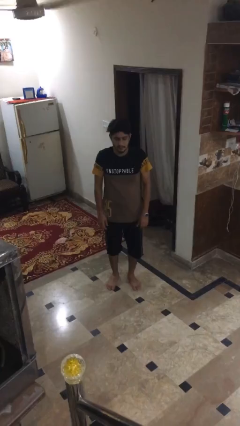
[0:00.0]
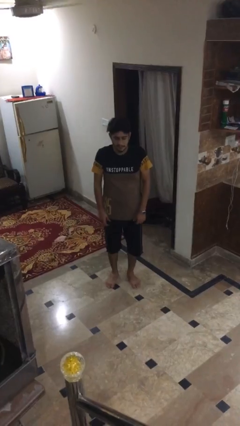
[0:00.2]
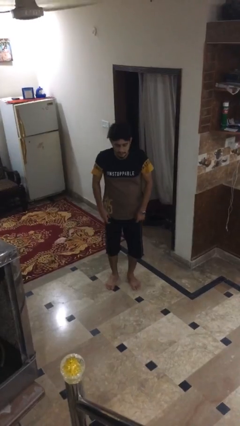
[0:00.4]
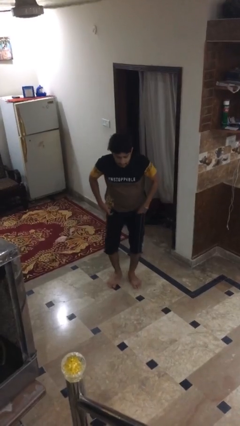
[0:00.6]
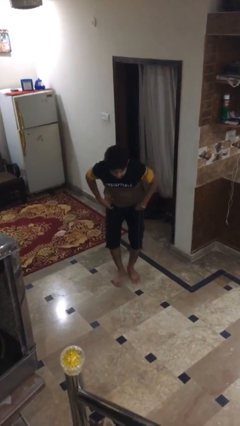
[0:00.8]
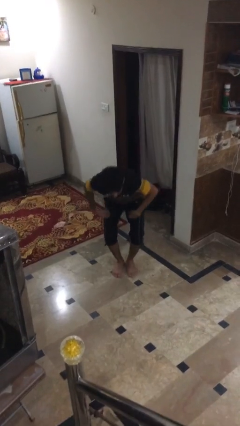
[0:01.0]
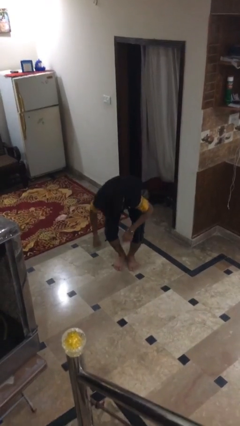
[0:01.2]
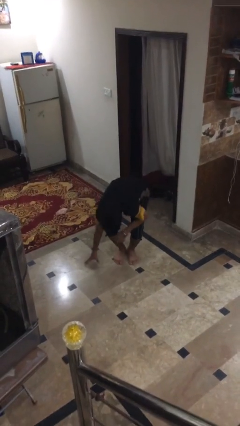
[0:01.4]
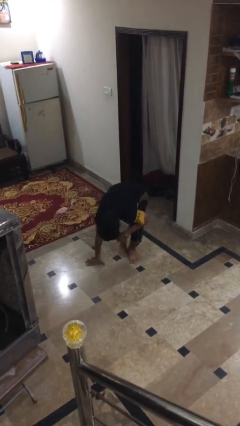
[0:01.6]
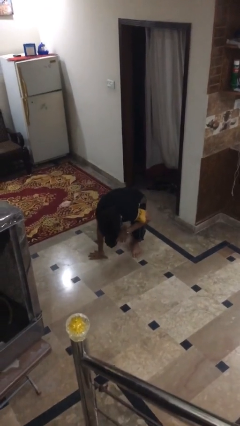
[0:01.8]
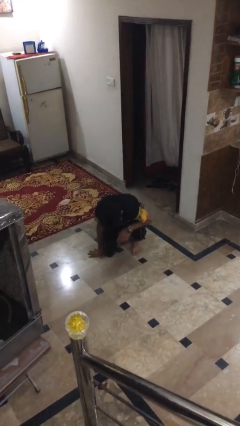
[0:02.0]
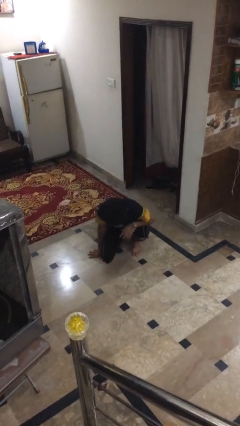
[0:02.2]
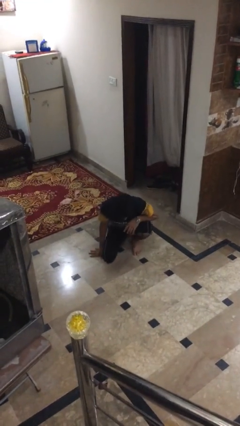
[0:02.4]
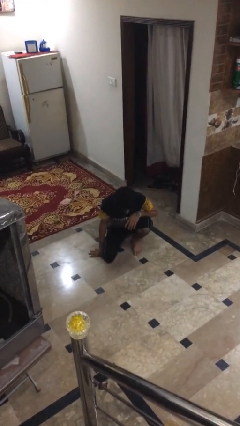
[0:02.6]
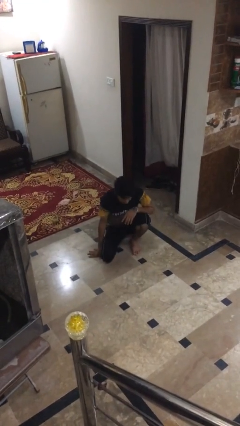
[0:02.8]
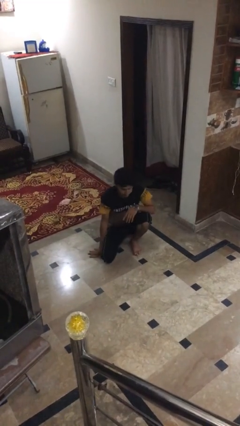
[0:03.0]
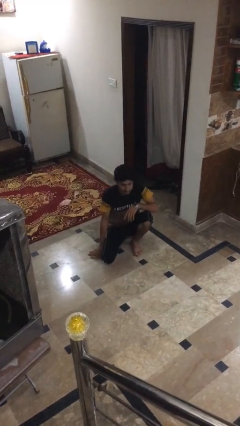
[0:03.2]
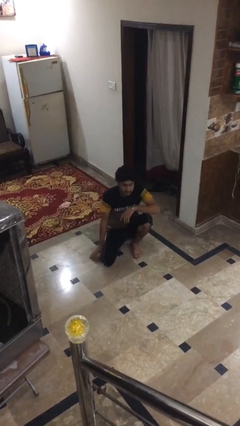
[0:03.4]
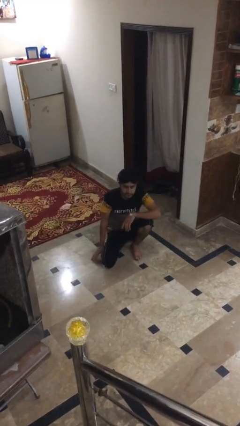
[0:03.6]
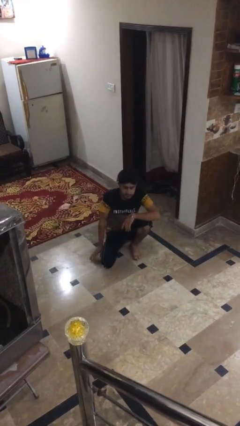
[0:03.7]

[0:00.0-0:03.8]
person sits crisscross

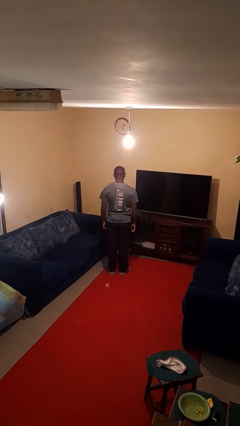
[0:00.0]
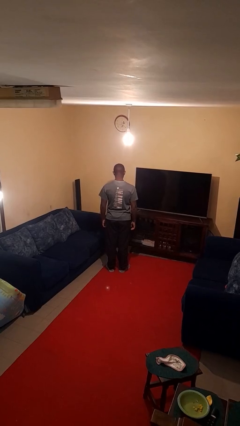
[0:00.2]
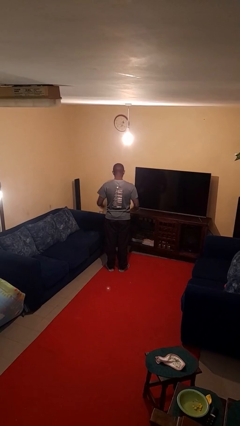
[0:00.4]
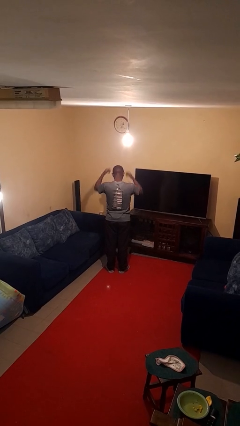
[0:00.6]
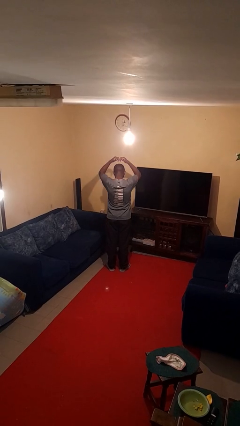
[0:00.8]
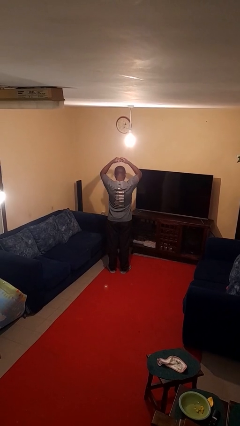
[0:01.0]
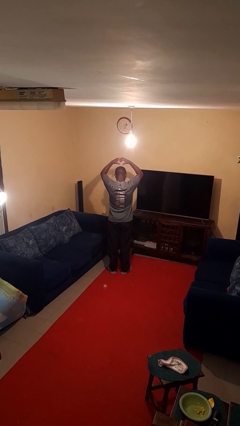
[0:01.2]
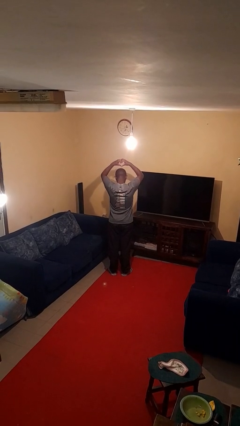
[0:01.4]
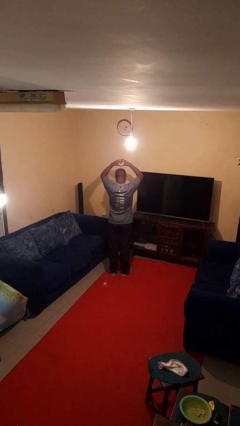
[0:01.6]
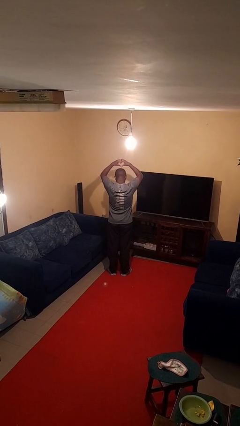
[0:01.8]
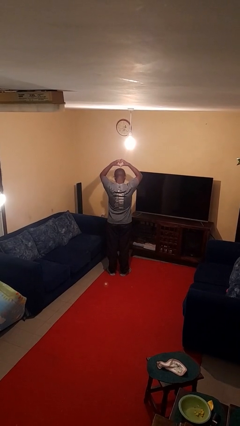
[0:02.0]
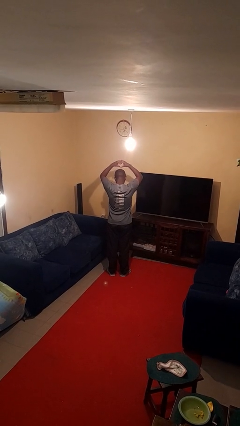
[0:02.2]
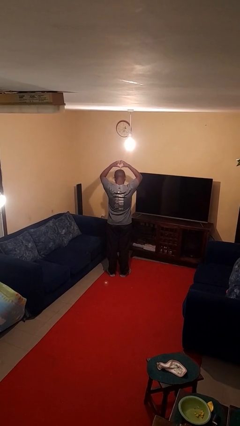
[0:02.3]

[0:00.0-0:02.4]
person gestures heart

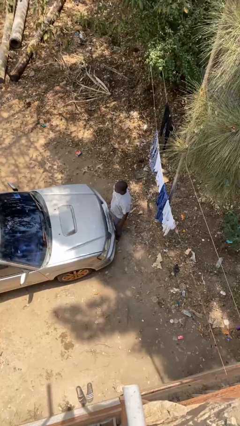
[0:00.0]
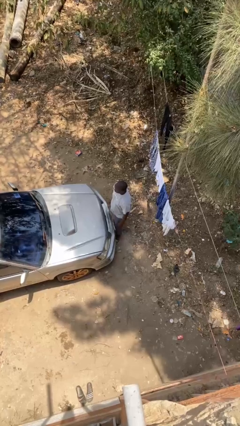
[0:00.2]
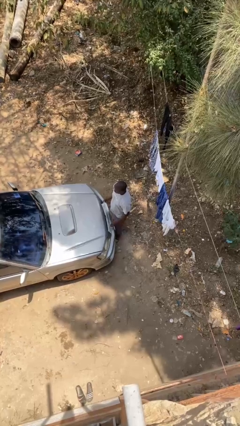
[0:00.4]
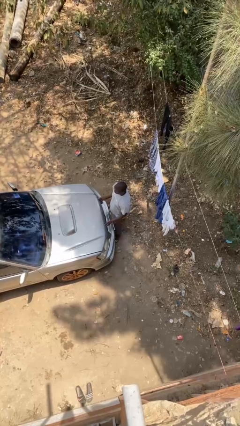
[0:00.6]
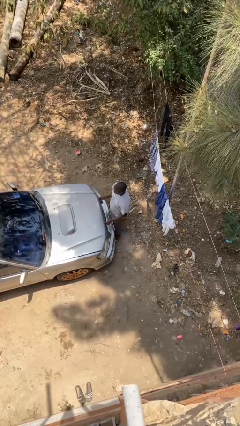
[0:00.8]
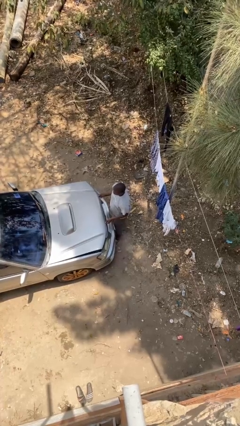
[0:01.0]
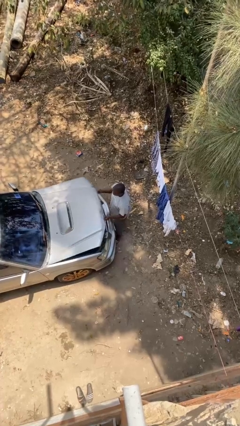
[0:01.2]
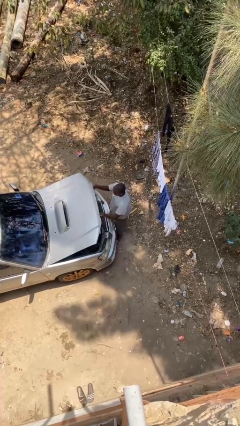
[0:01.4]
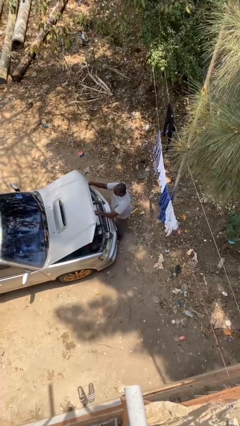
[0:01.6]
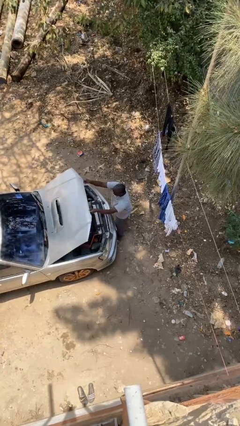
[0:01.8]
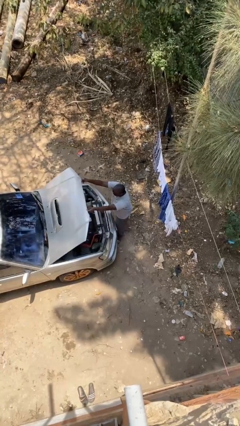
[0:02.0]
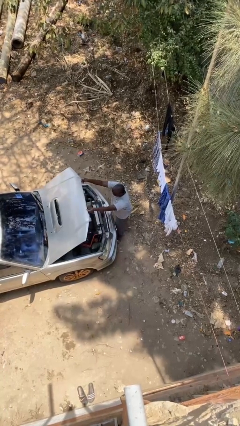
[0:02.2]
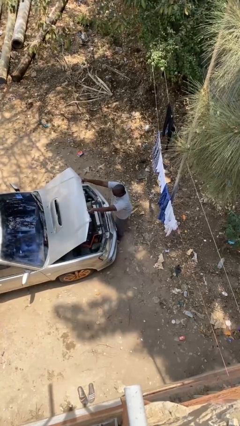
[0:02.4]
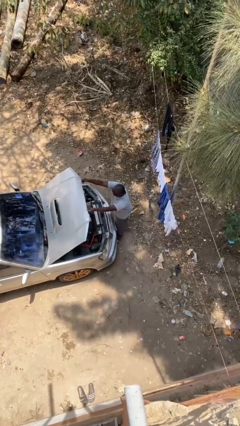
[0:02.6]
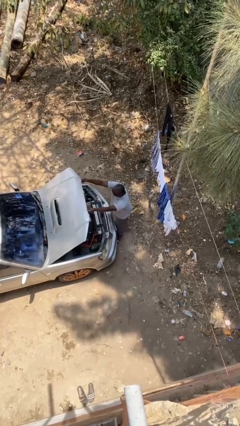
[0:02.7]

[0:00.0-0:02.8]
person opens car hood

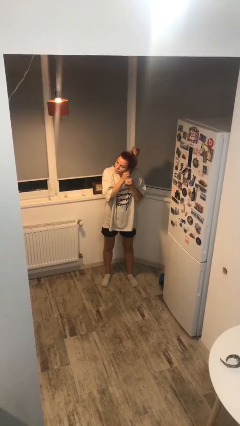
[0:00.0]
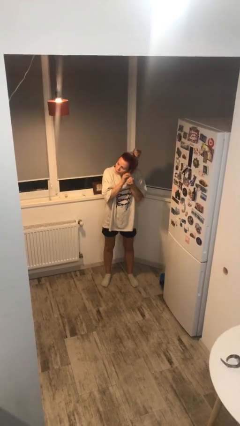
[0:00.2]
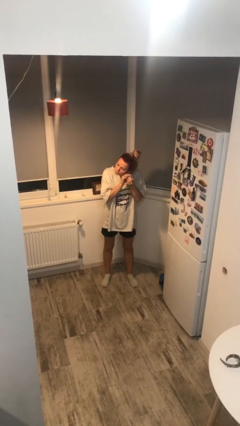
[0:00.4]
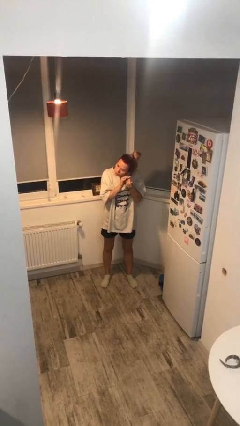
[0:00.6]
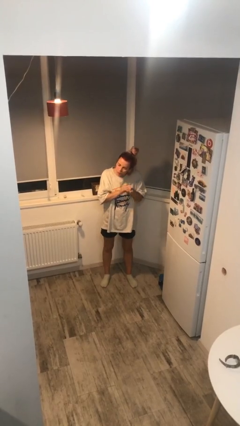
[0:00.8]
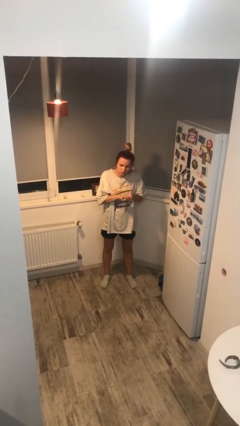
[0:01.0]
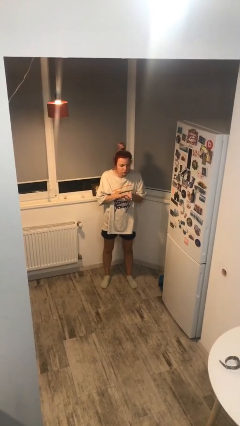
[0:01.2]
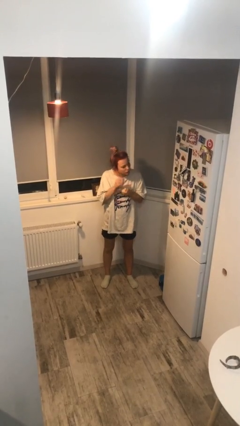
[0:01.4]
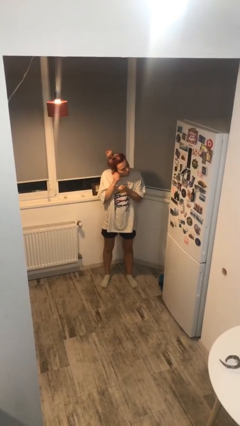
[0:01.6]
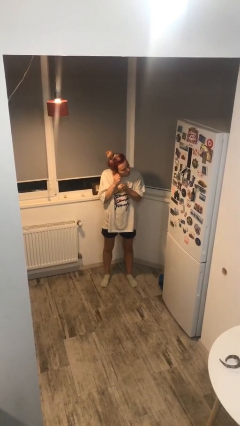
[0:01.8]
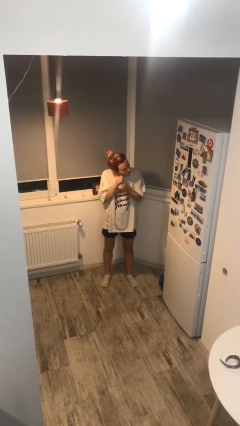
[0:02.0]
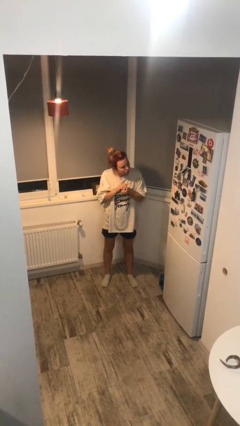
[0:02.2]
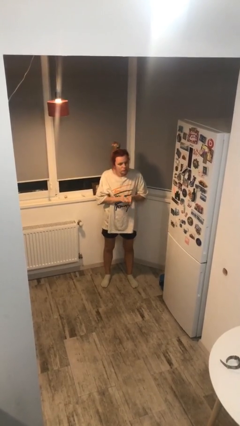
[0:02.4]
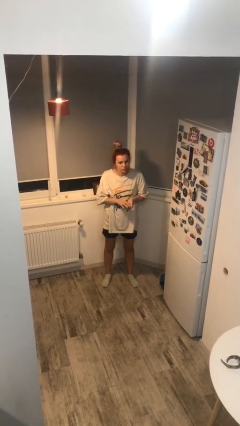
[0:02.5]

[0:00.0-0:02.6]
person takes off earrings

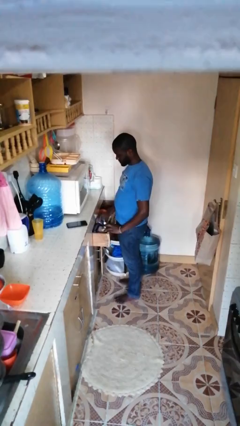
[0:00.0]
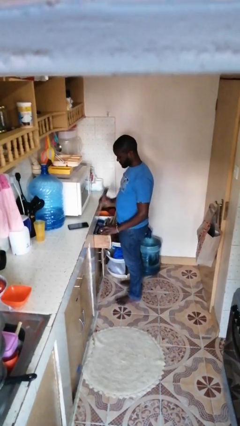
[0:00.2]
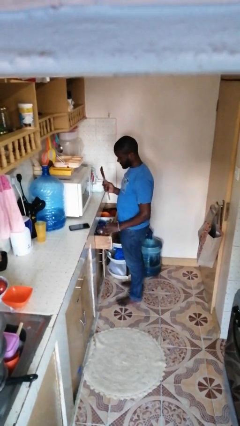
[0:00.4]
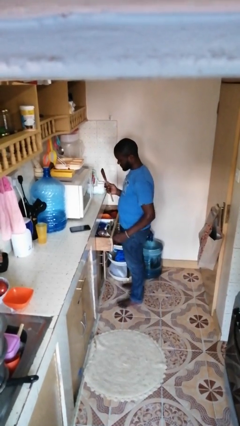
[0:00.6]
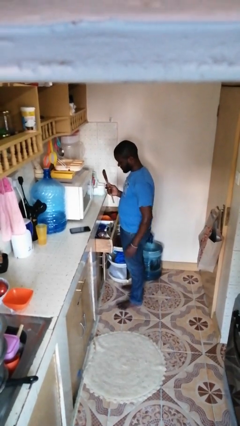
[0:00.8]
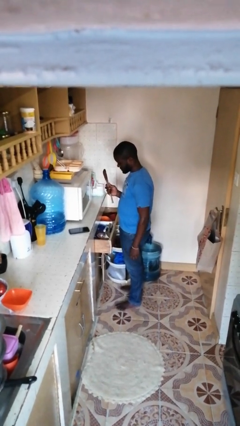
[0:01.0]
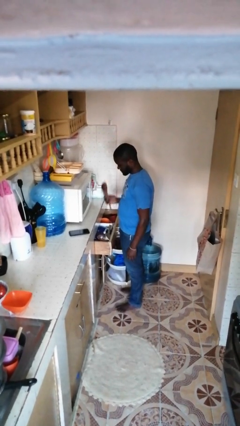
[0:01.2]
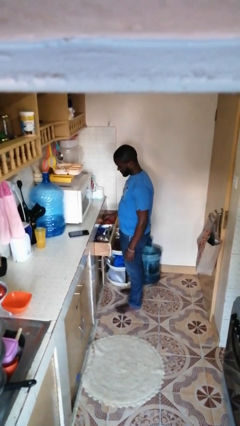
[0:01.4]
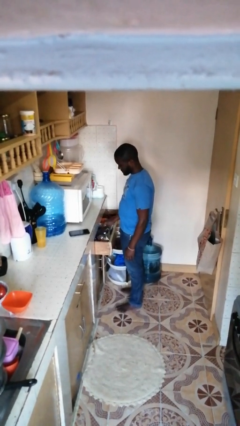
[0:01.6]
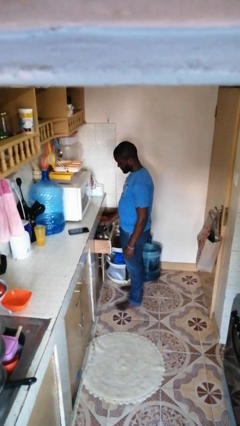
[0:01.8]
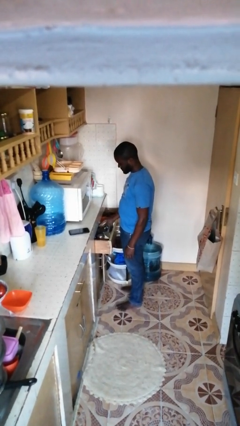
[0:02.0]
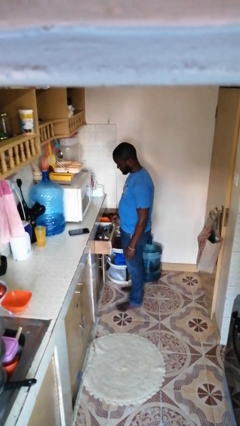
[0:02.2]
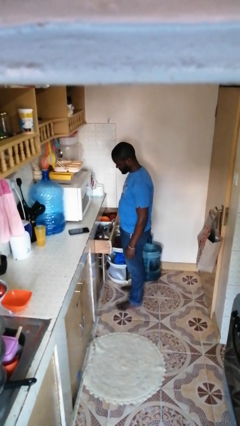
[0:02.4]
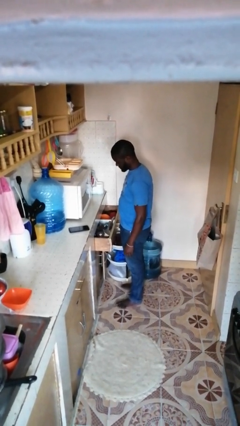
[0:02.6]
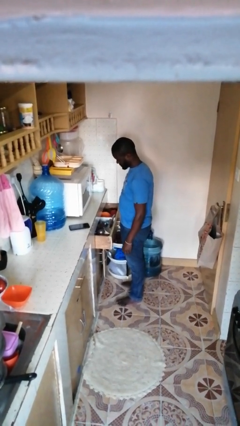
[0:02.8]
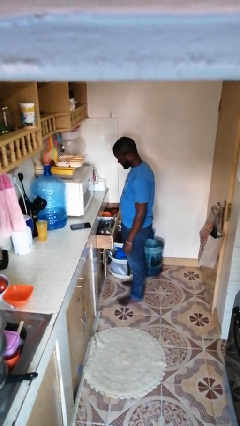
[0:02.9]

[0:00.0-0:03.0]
person puts object into kitchen drawer

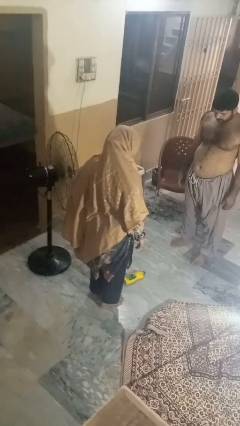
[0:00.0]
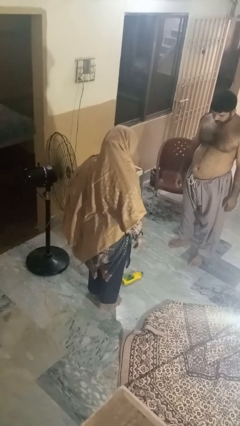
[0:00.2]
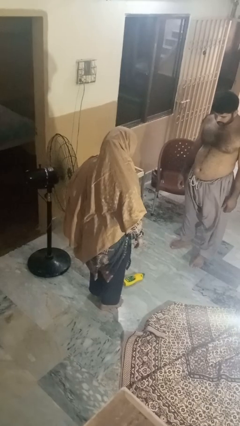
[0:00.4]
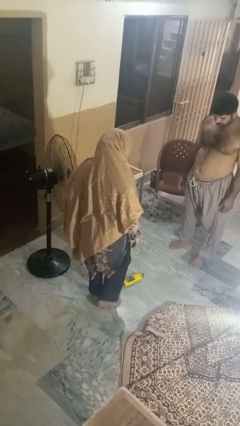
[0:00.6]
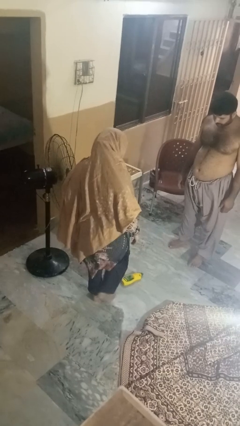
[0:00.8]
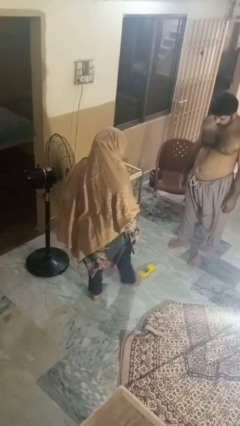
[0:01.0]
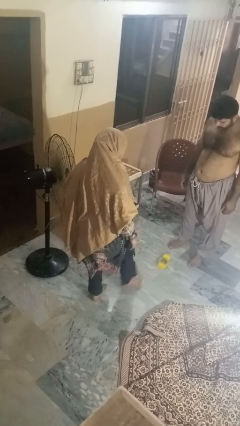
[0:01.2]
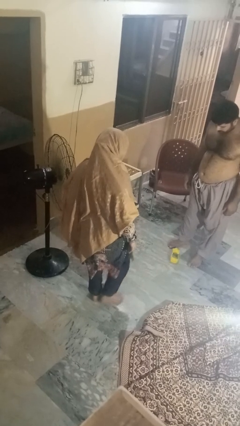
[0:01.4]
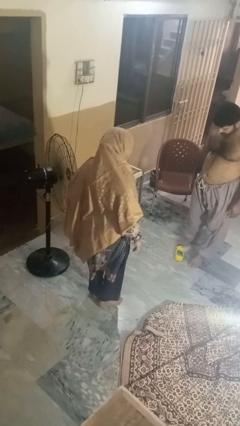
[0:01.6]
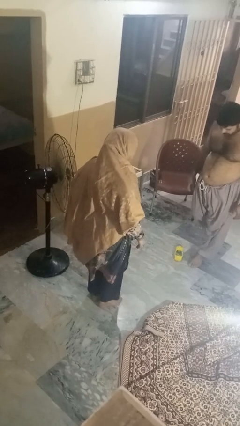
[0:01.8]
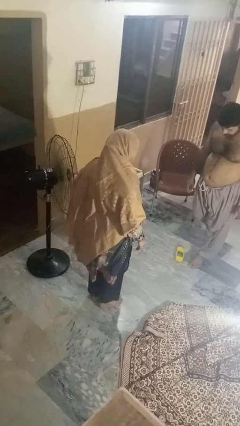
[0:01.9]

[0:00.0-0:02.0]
person kicks object to person
